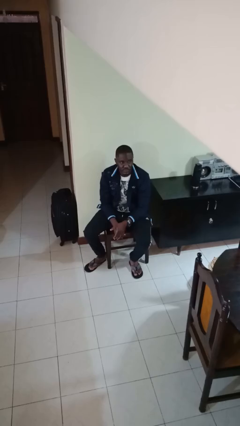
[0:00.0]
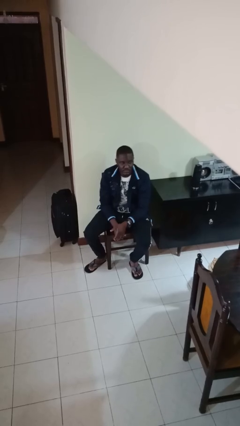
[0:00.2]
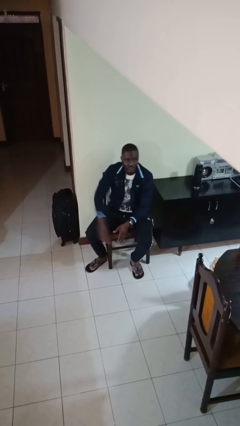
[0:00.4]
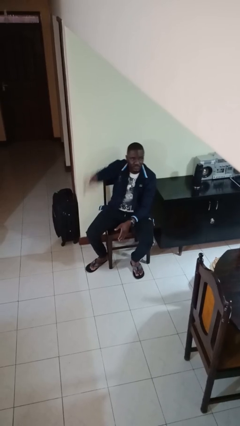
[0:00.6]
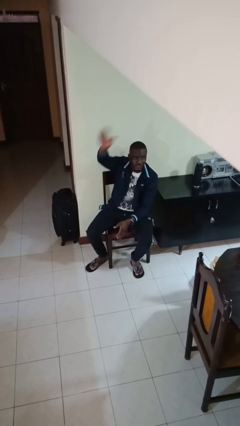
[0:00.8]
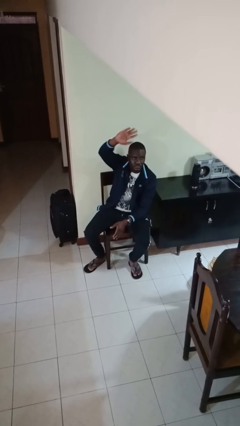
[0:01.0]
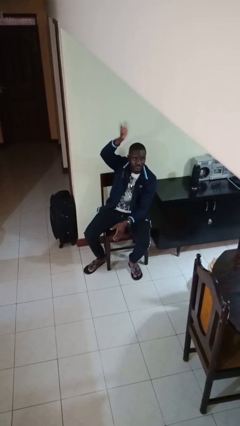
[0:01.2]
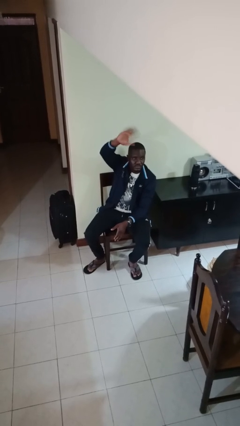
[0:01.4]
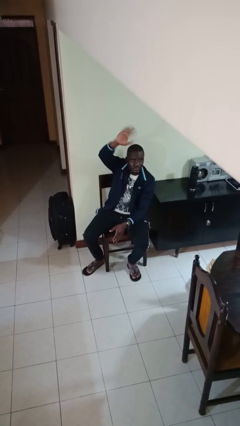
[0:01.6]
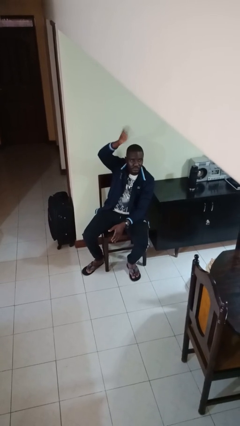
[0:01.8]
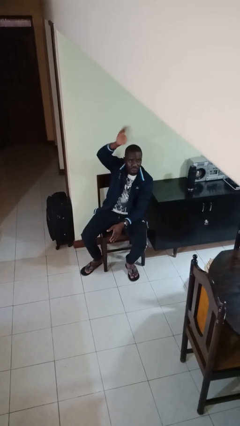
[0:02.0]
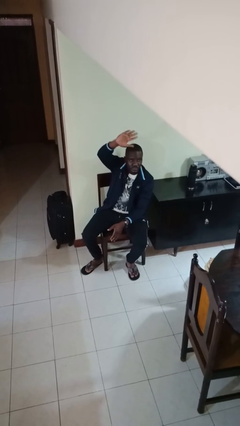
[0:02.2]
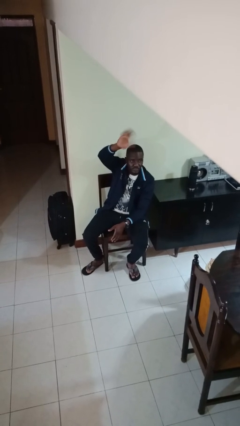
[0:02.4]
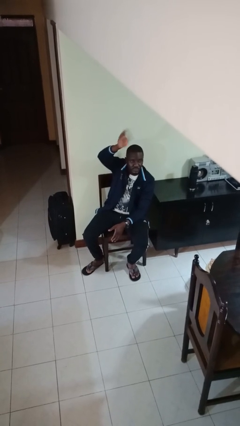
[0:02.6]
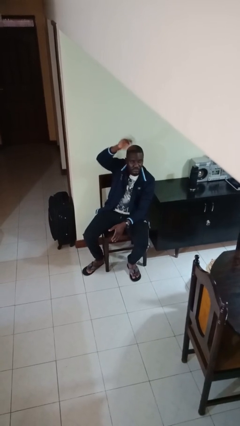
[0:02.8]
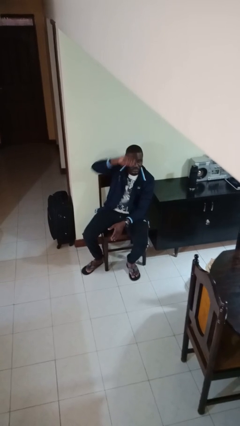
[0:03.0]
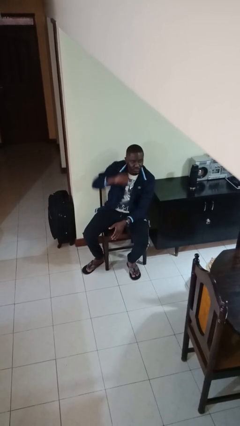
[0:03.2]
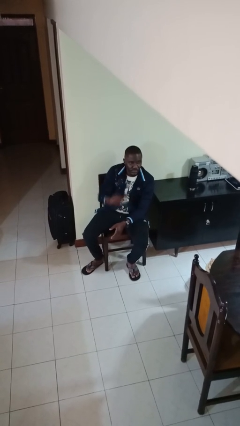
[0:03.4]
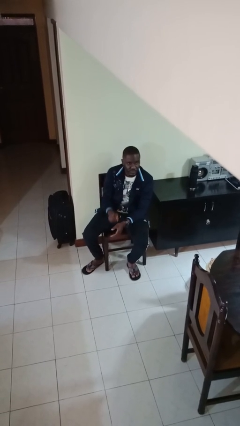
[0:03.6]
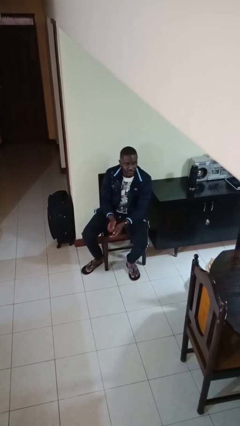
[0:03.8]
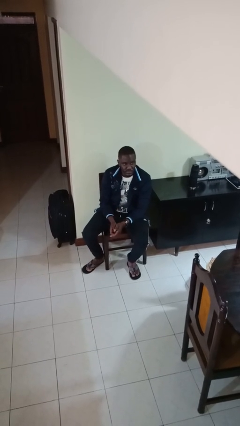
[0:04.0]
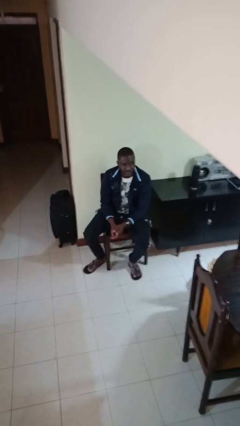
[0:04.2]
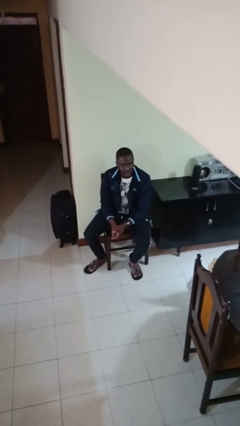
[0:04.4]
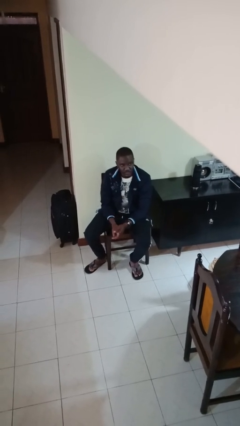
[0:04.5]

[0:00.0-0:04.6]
person waves at person

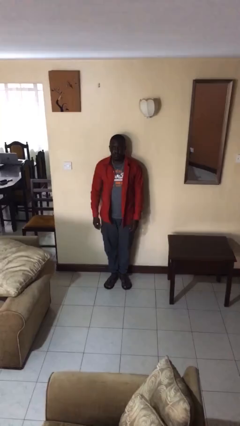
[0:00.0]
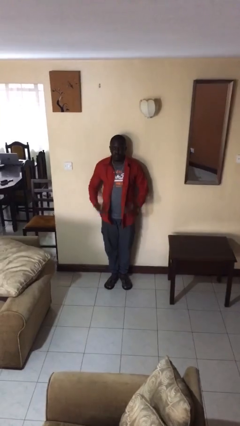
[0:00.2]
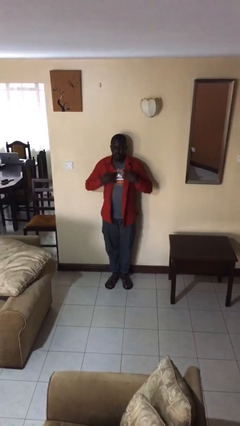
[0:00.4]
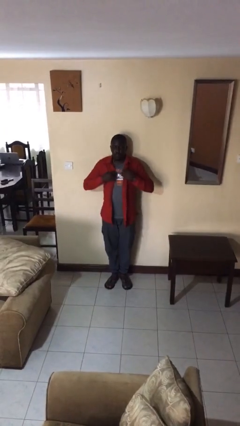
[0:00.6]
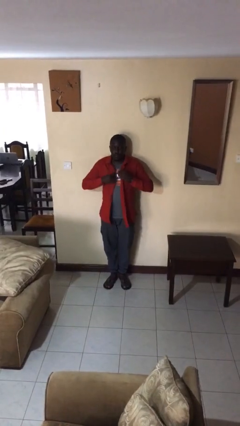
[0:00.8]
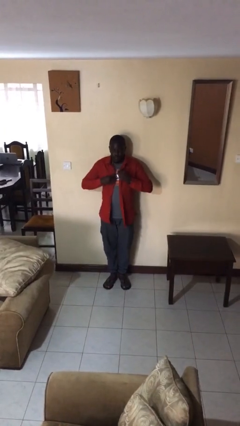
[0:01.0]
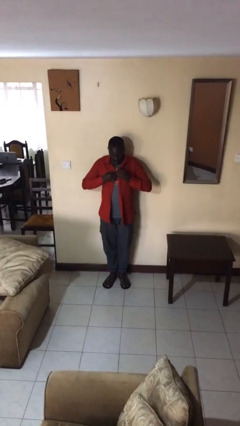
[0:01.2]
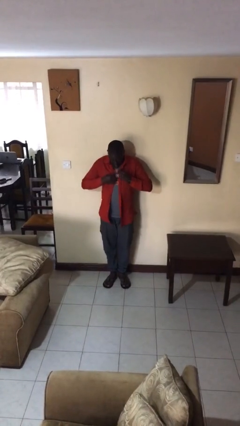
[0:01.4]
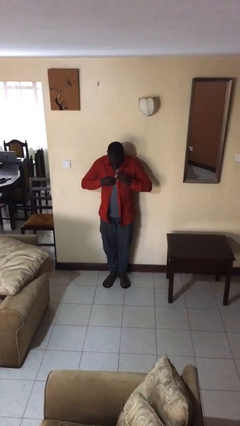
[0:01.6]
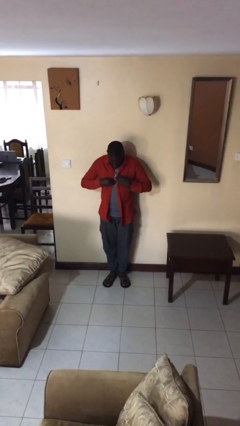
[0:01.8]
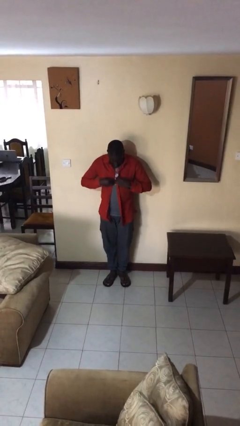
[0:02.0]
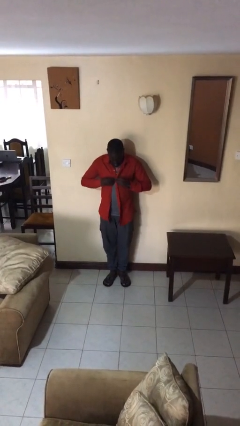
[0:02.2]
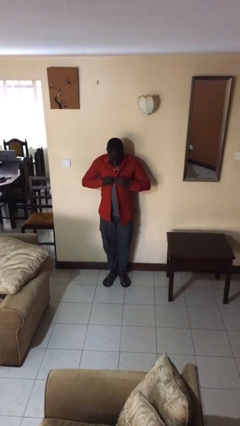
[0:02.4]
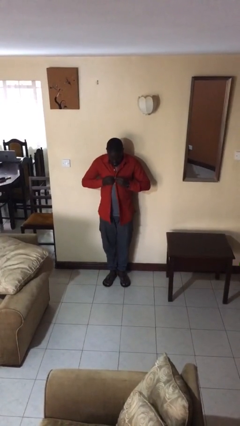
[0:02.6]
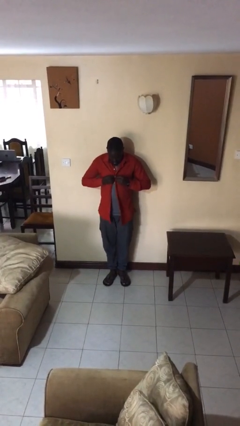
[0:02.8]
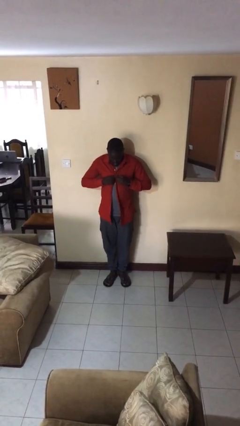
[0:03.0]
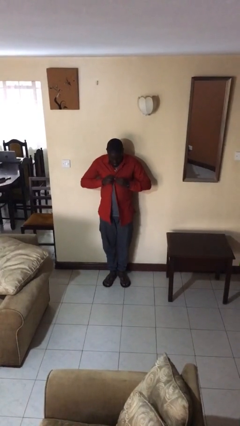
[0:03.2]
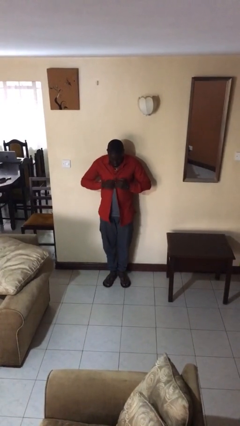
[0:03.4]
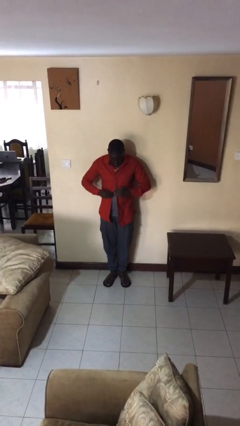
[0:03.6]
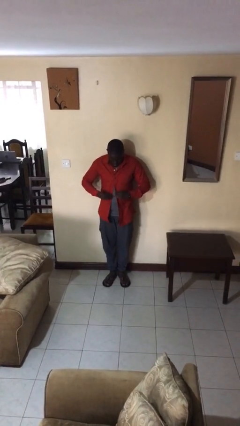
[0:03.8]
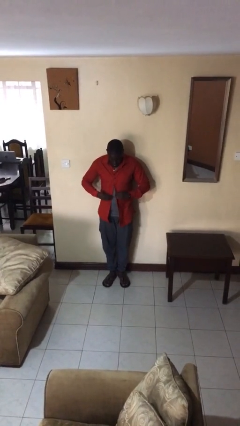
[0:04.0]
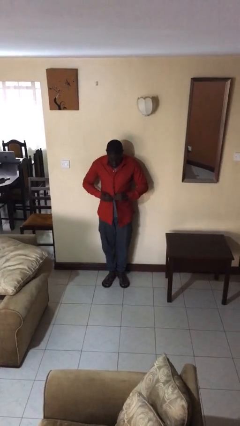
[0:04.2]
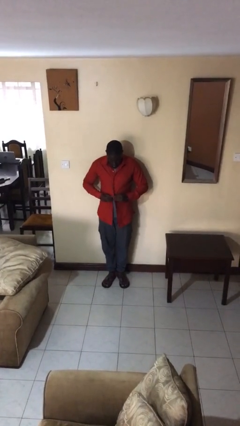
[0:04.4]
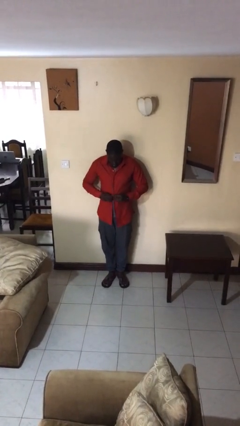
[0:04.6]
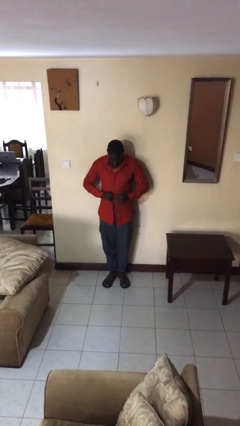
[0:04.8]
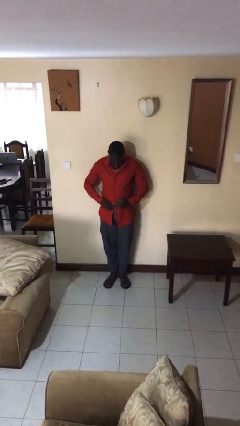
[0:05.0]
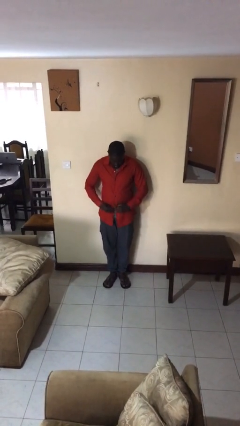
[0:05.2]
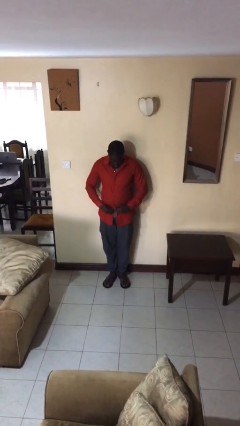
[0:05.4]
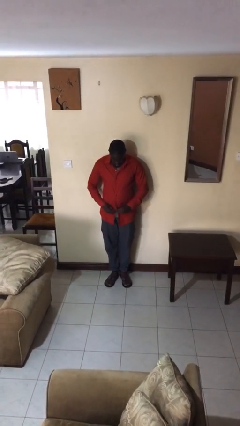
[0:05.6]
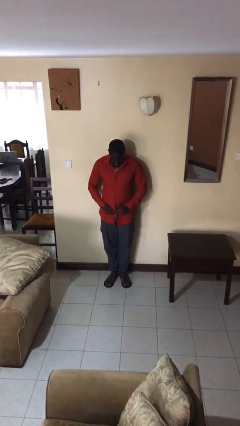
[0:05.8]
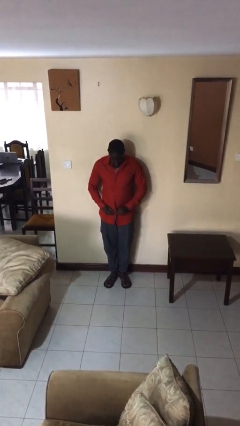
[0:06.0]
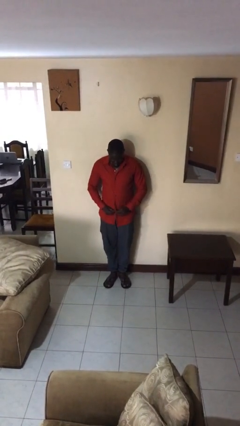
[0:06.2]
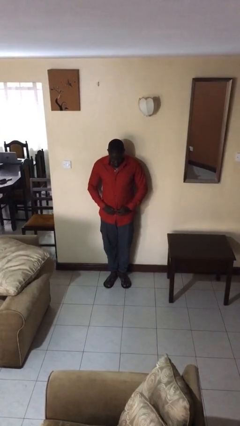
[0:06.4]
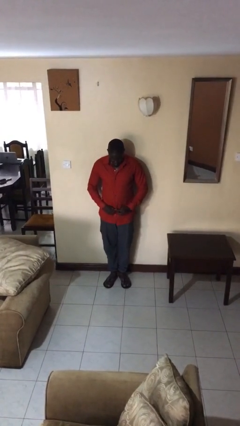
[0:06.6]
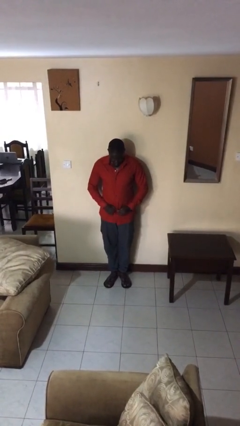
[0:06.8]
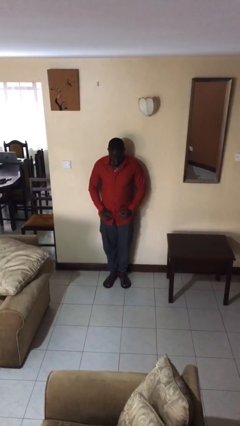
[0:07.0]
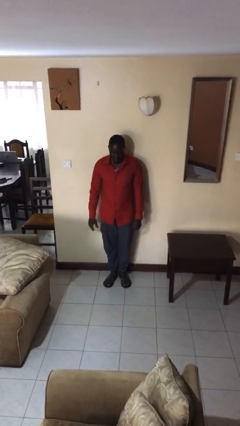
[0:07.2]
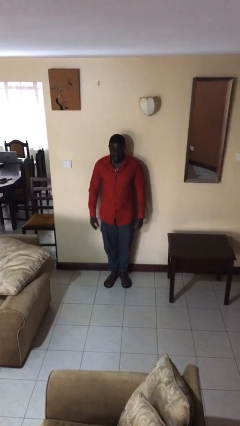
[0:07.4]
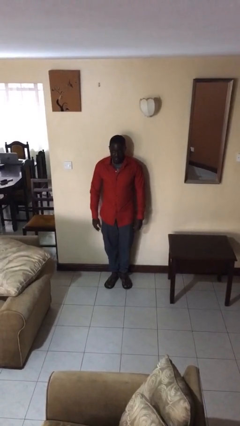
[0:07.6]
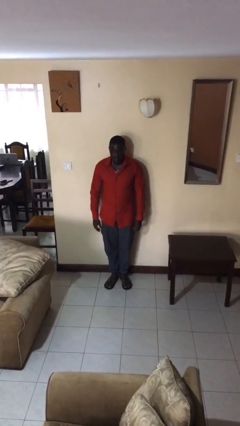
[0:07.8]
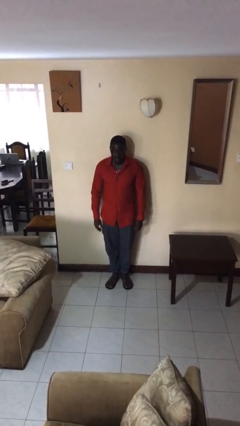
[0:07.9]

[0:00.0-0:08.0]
person buttons shirt

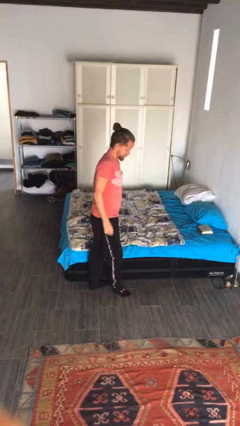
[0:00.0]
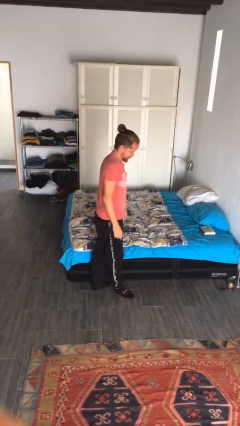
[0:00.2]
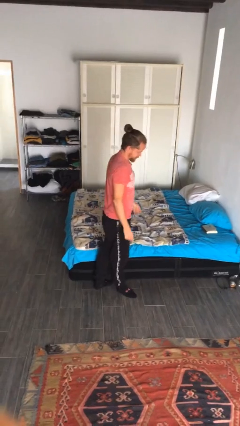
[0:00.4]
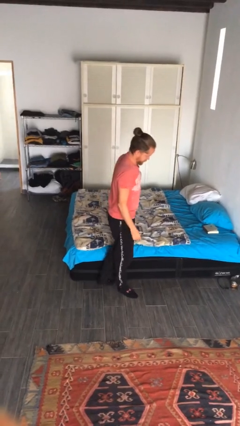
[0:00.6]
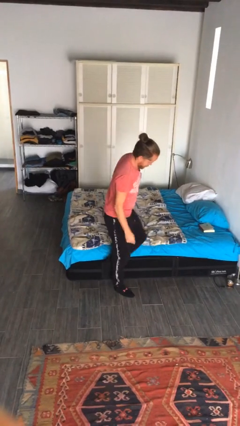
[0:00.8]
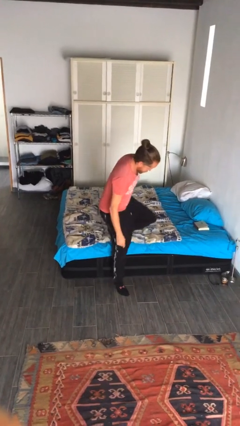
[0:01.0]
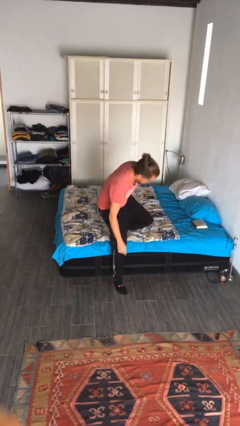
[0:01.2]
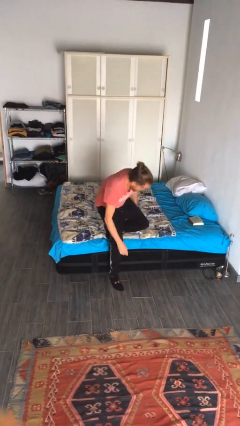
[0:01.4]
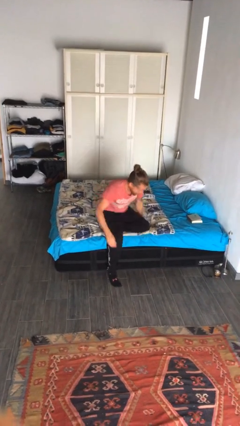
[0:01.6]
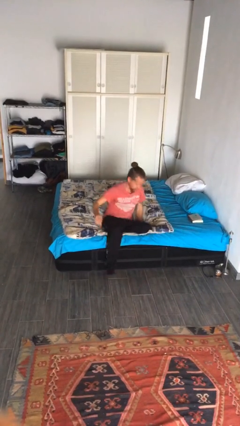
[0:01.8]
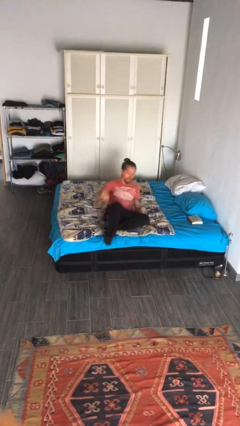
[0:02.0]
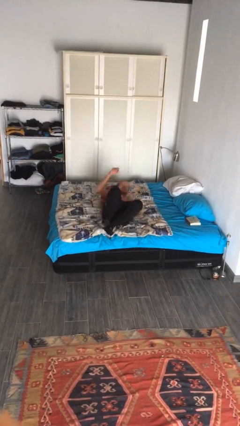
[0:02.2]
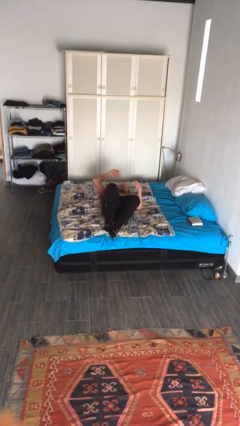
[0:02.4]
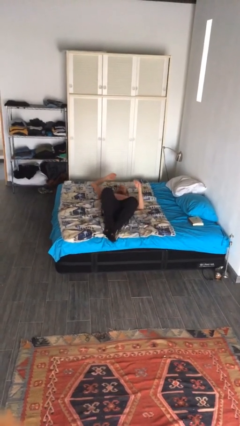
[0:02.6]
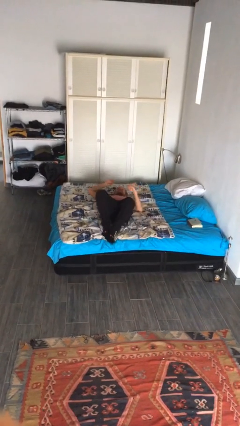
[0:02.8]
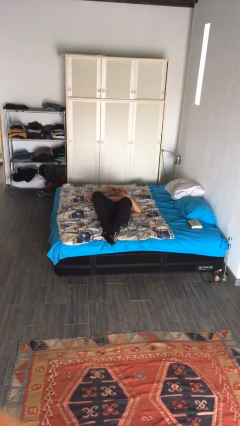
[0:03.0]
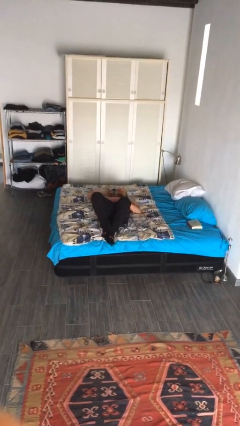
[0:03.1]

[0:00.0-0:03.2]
person lies down on bed

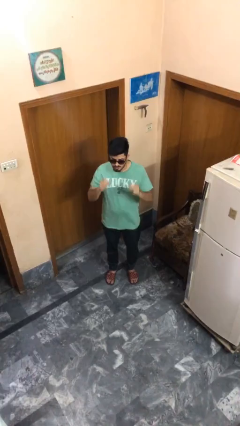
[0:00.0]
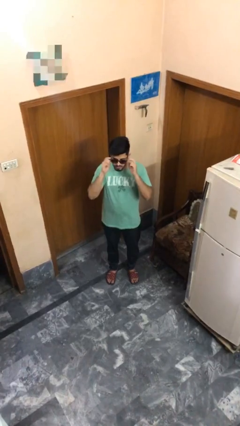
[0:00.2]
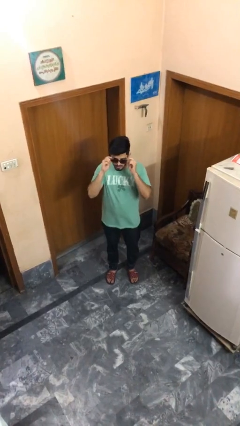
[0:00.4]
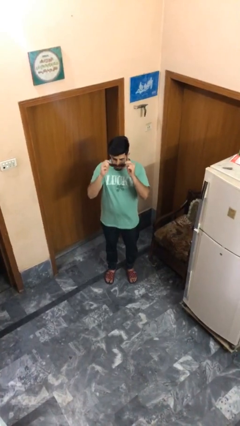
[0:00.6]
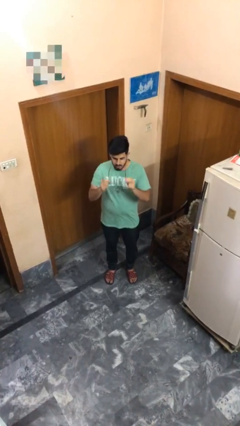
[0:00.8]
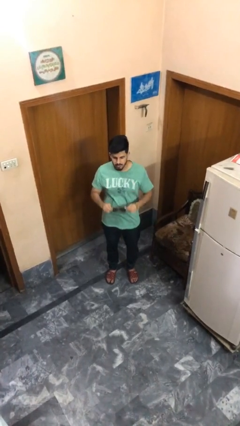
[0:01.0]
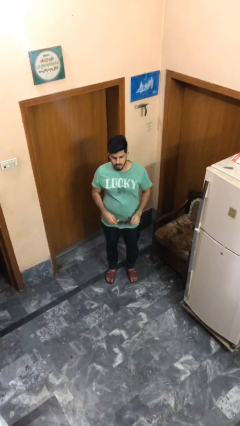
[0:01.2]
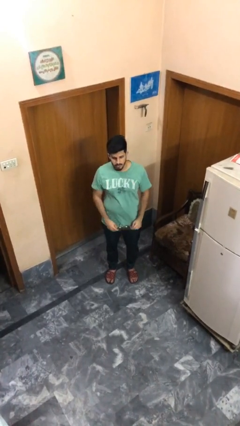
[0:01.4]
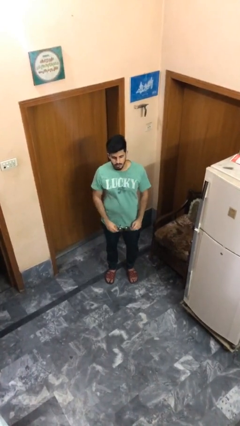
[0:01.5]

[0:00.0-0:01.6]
person takes off sunglasses

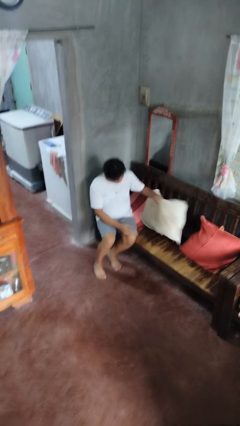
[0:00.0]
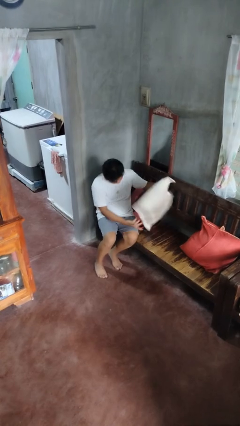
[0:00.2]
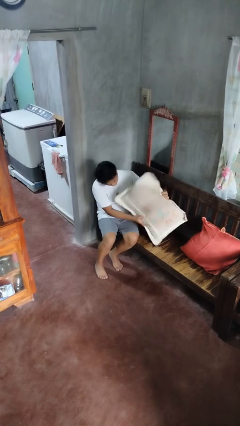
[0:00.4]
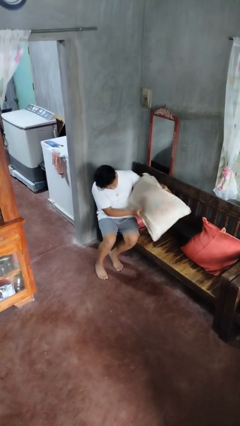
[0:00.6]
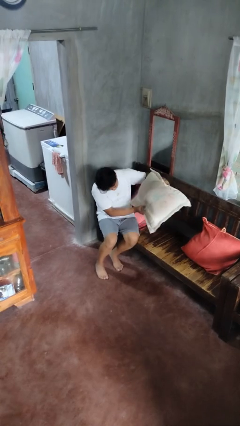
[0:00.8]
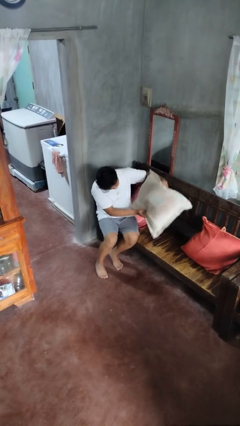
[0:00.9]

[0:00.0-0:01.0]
person searches in couch
